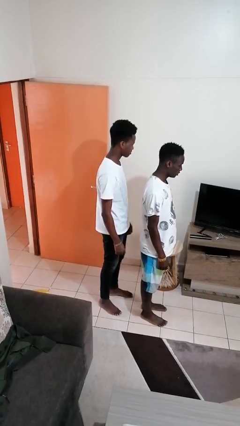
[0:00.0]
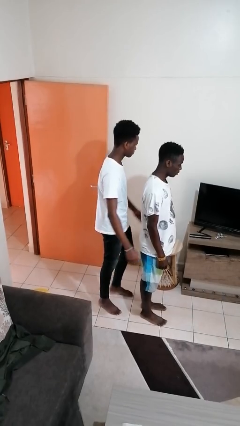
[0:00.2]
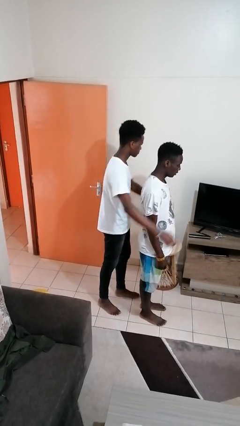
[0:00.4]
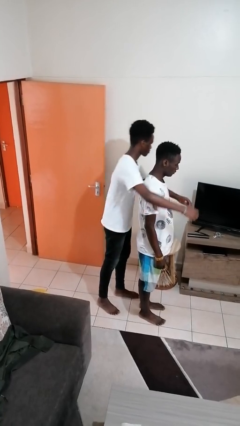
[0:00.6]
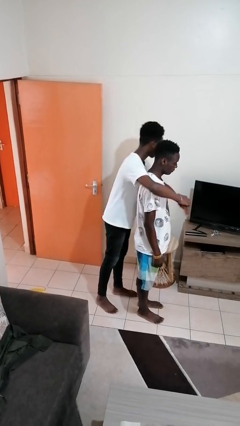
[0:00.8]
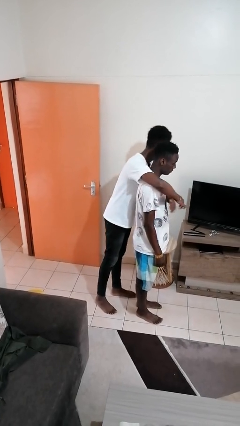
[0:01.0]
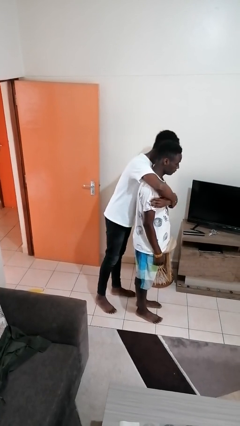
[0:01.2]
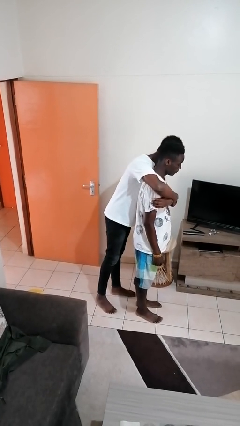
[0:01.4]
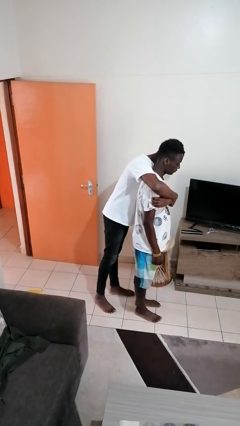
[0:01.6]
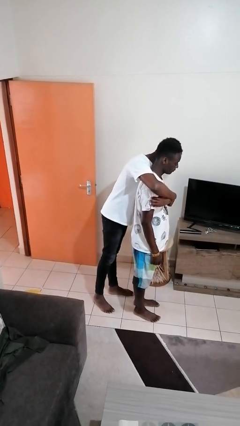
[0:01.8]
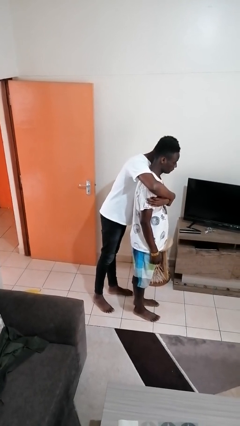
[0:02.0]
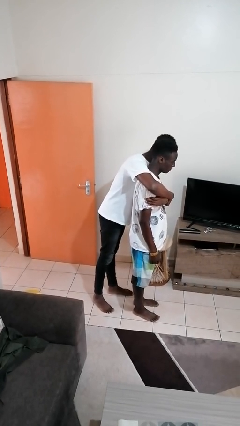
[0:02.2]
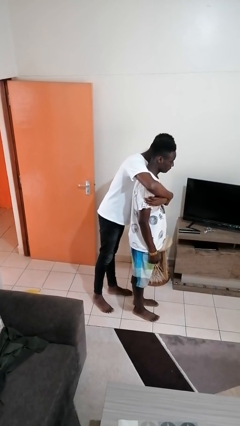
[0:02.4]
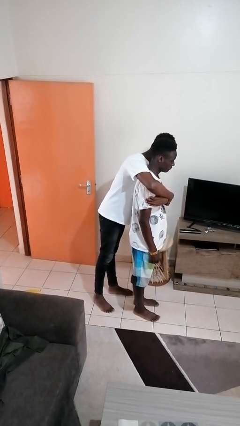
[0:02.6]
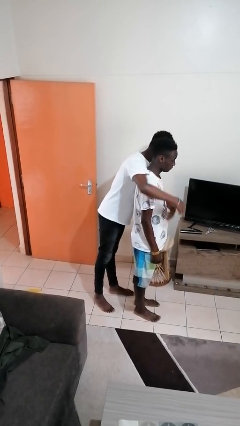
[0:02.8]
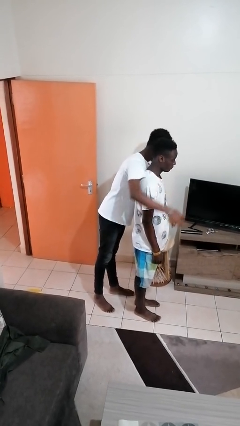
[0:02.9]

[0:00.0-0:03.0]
person hugs person from behind

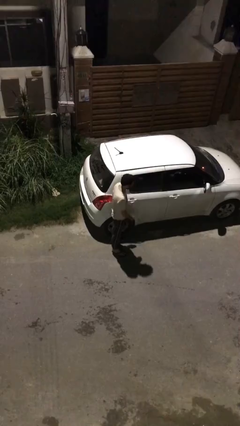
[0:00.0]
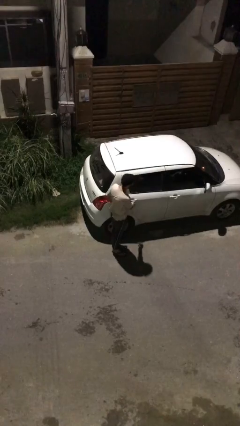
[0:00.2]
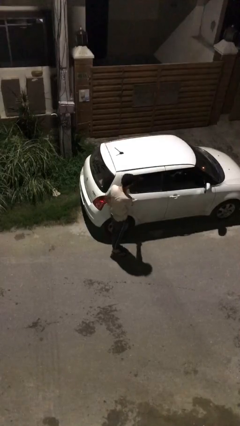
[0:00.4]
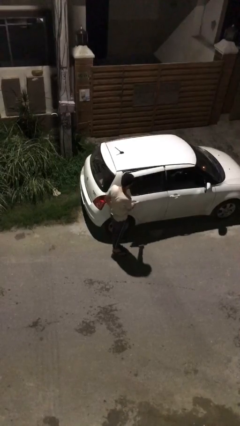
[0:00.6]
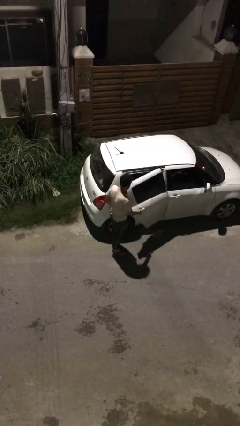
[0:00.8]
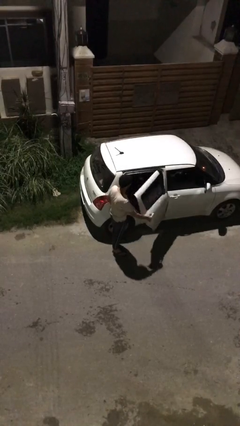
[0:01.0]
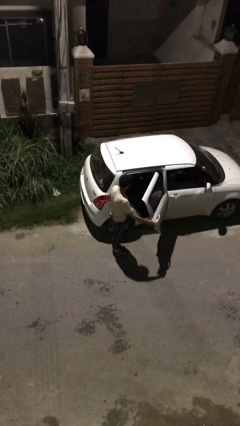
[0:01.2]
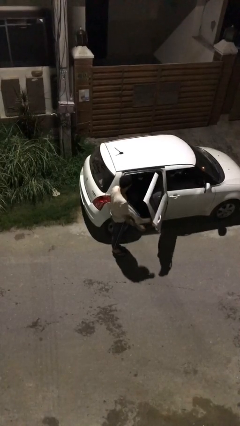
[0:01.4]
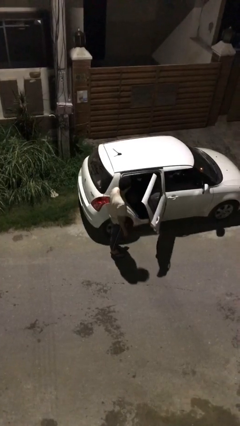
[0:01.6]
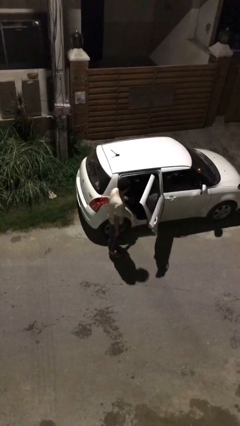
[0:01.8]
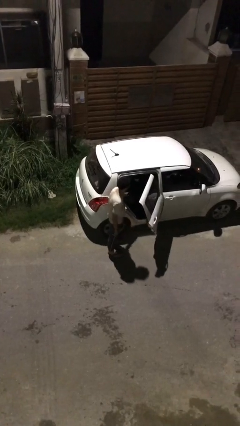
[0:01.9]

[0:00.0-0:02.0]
person opens car door

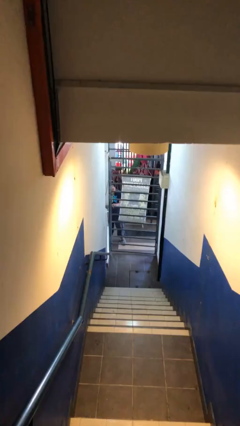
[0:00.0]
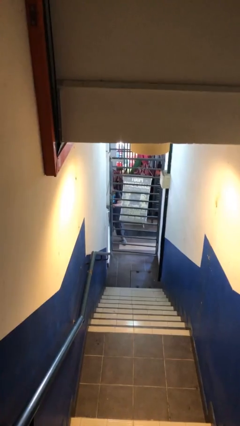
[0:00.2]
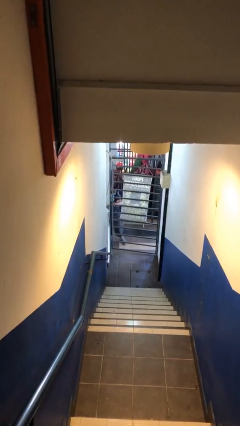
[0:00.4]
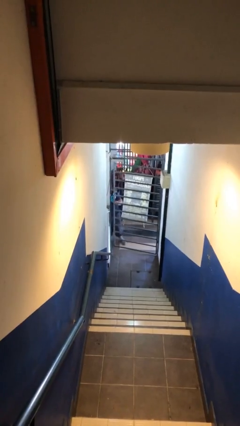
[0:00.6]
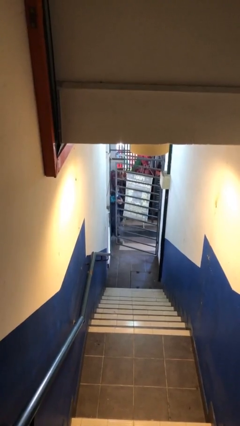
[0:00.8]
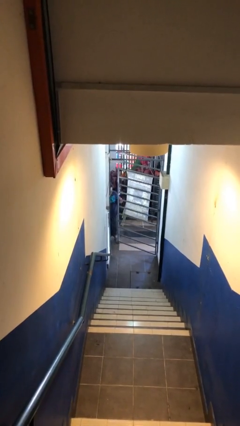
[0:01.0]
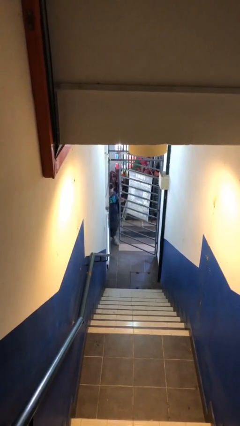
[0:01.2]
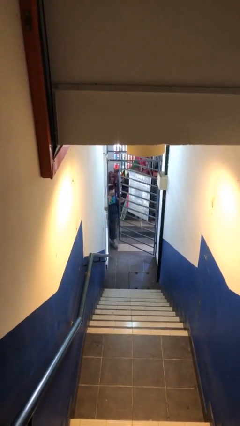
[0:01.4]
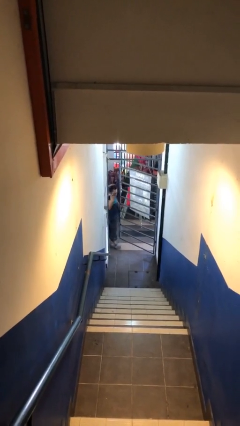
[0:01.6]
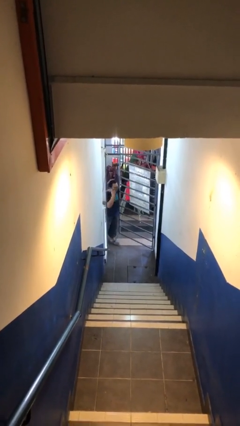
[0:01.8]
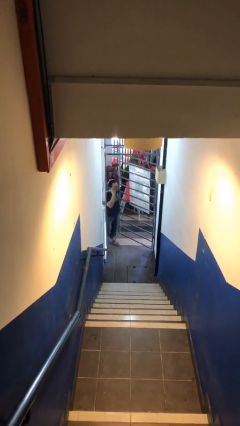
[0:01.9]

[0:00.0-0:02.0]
person opens facility door

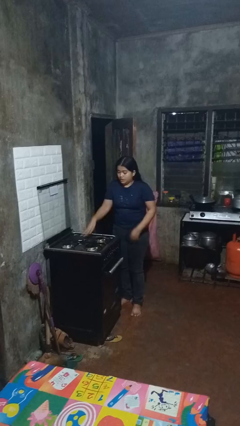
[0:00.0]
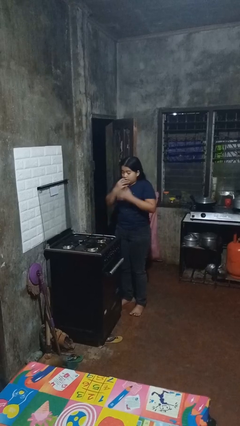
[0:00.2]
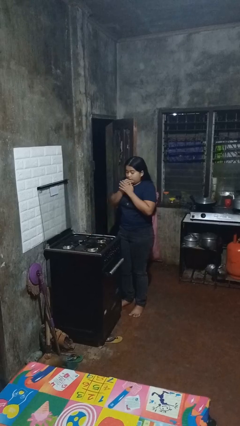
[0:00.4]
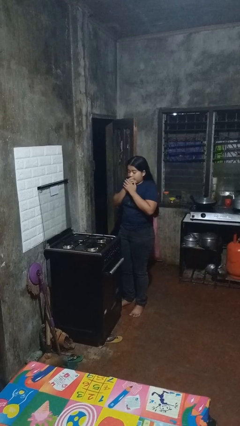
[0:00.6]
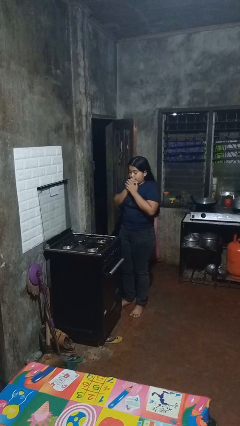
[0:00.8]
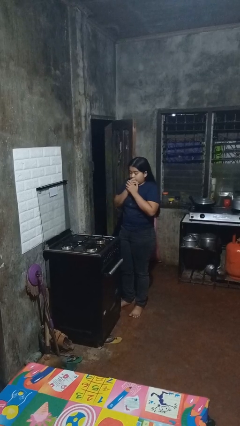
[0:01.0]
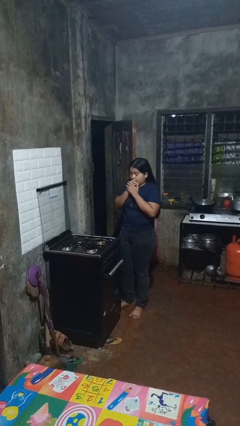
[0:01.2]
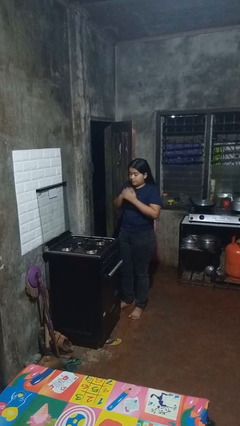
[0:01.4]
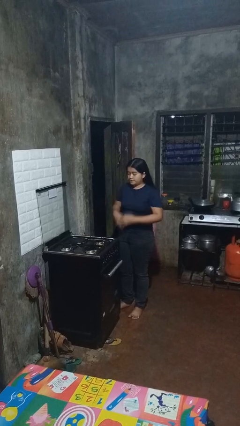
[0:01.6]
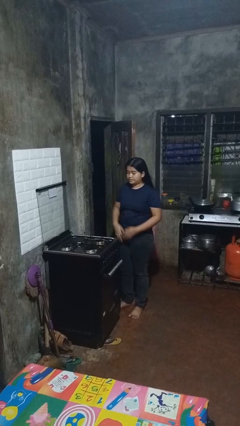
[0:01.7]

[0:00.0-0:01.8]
person burns hand

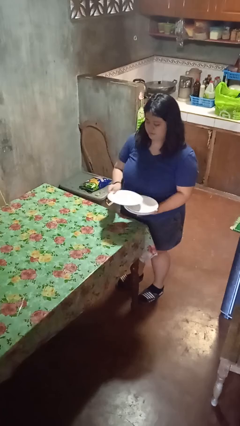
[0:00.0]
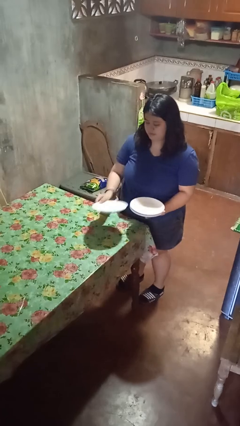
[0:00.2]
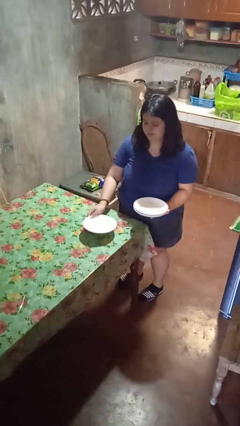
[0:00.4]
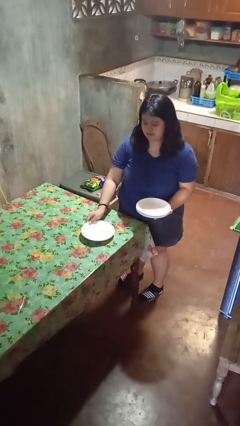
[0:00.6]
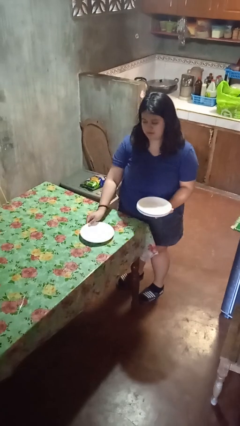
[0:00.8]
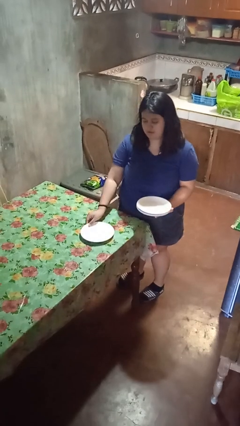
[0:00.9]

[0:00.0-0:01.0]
person sets table

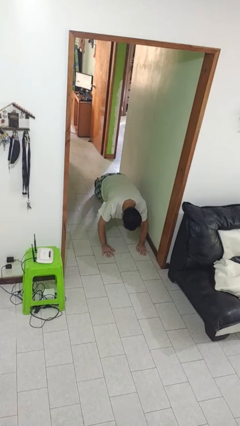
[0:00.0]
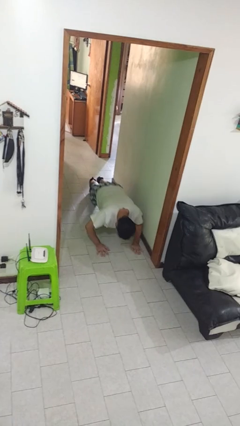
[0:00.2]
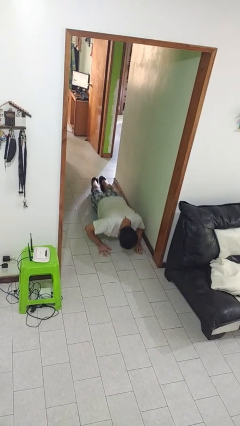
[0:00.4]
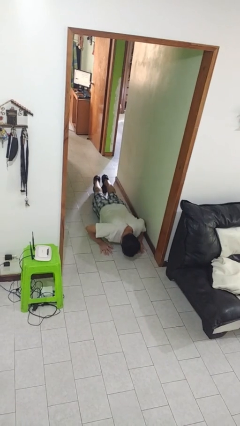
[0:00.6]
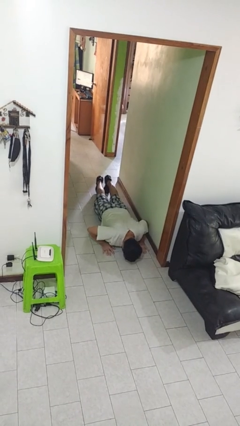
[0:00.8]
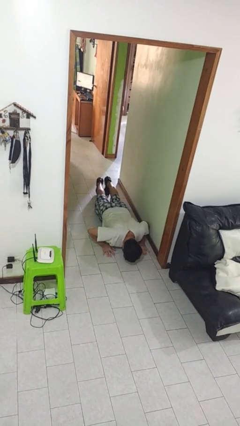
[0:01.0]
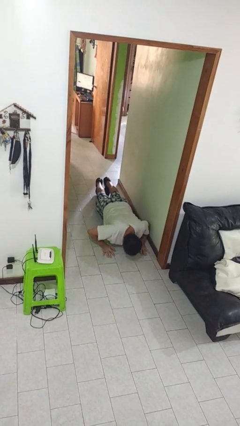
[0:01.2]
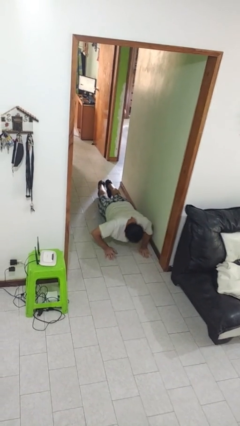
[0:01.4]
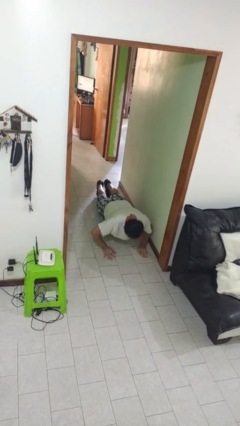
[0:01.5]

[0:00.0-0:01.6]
person exercises with pushup

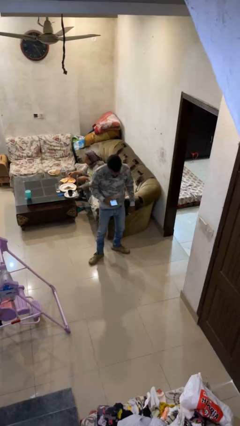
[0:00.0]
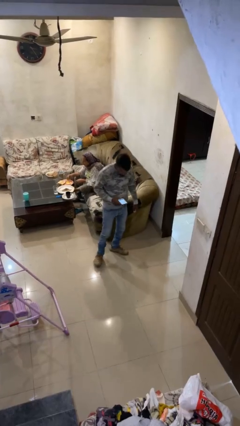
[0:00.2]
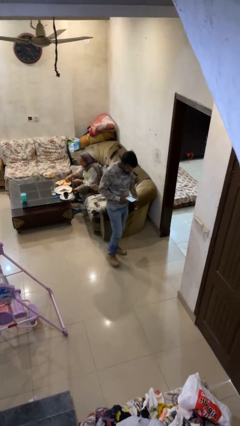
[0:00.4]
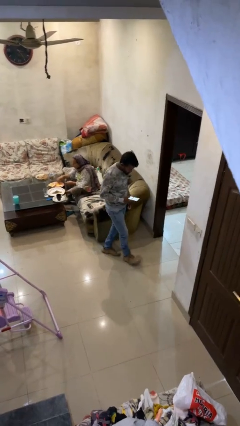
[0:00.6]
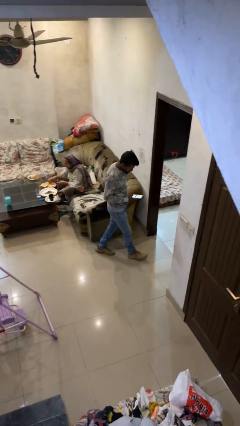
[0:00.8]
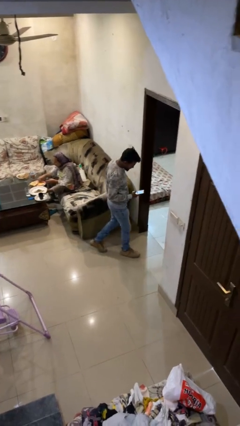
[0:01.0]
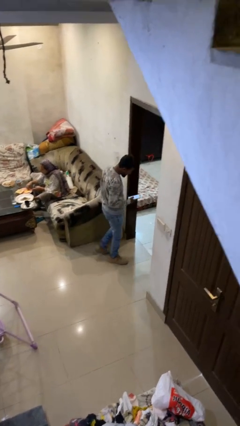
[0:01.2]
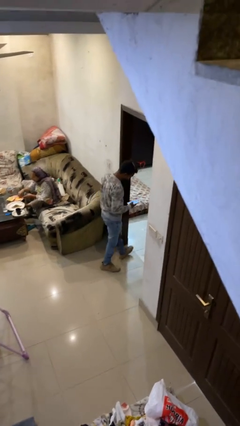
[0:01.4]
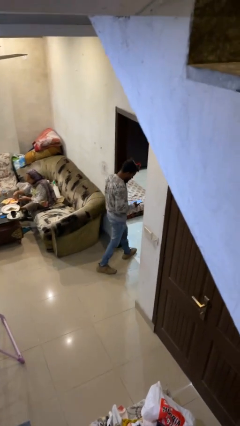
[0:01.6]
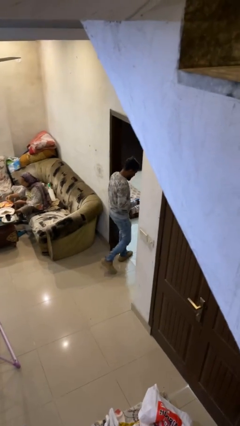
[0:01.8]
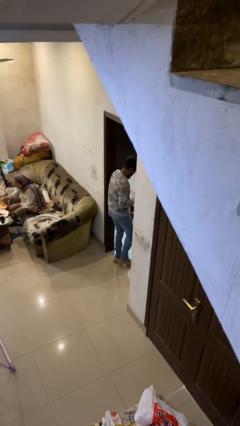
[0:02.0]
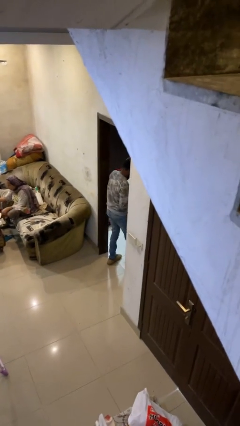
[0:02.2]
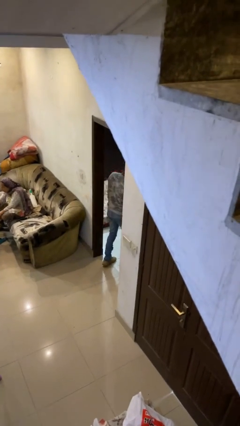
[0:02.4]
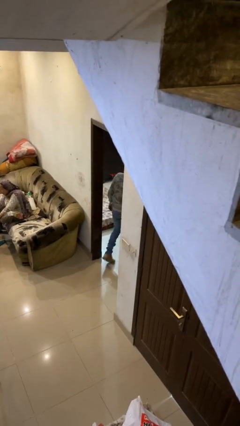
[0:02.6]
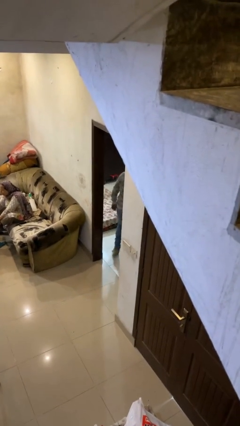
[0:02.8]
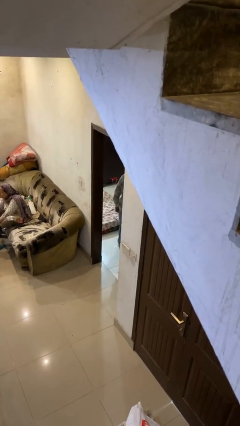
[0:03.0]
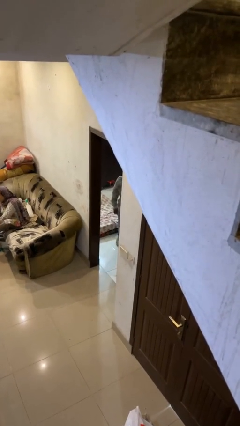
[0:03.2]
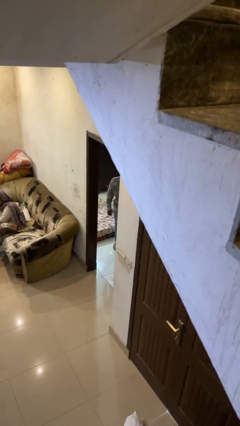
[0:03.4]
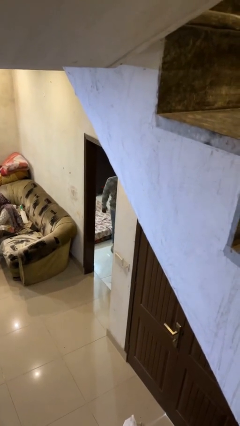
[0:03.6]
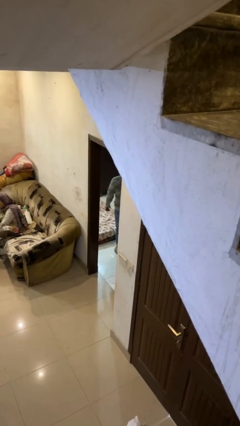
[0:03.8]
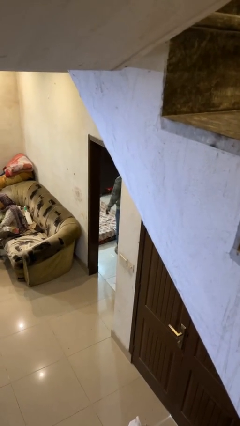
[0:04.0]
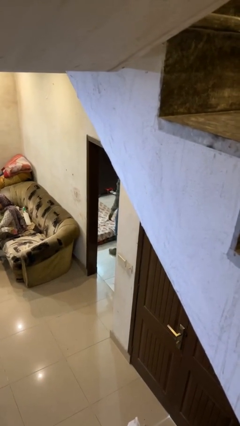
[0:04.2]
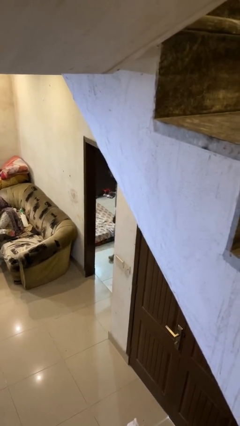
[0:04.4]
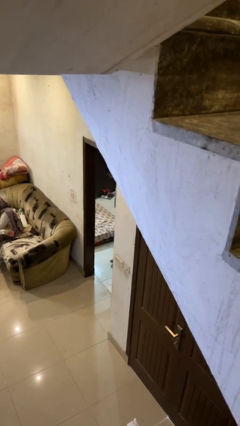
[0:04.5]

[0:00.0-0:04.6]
person exits scene through structure

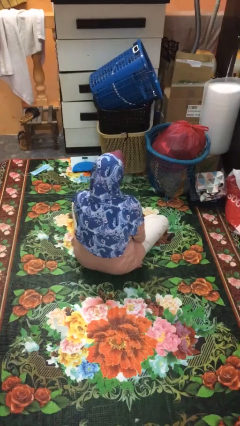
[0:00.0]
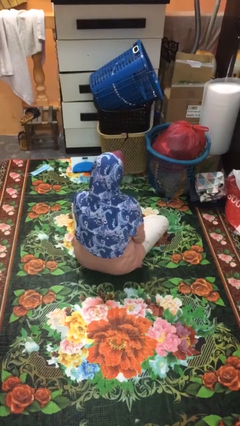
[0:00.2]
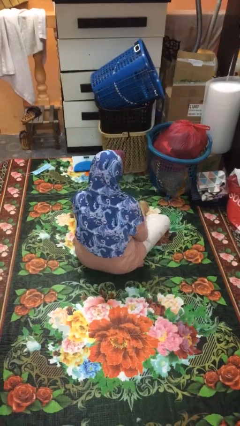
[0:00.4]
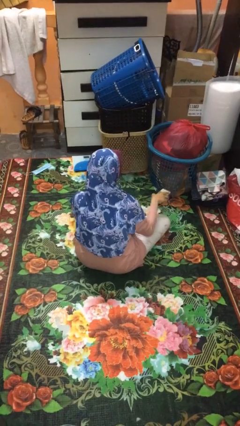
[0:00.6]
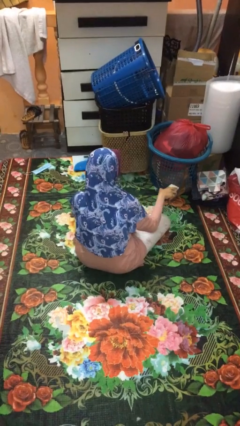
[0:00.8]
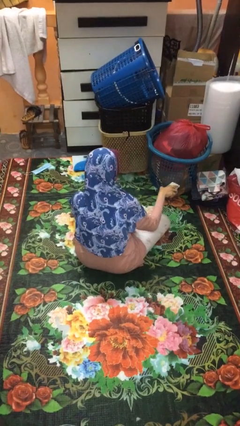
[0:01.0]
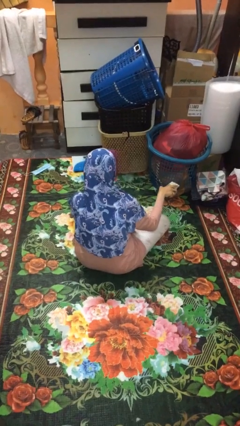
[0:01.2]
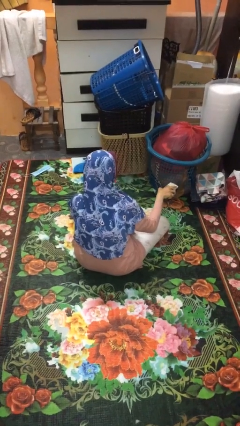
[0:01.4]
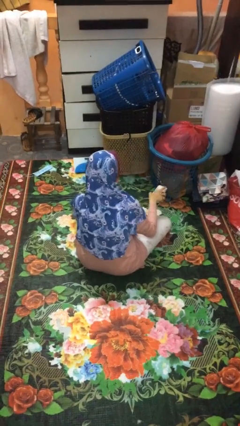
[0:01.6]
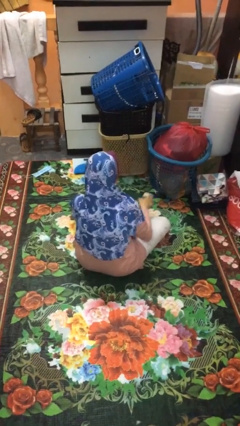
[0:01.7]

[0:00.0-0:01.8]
person uses television remote
